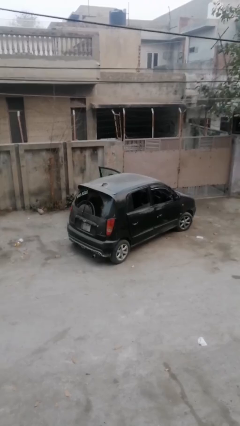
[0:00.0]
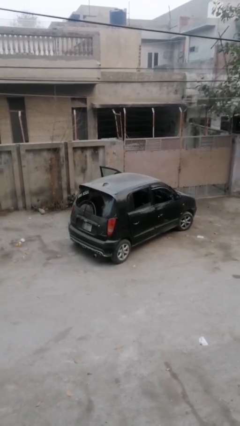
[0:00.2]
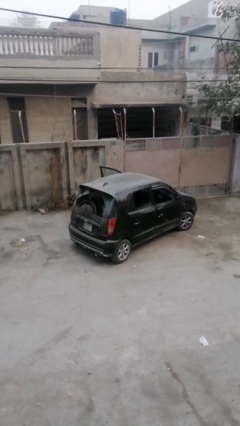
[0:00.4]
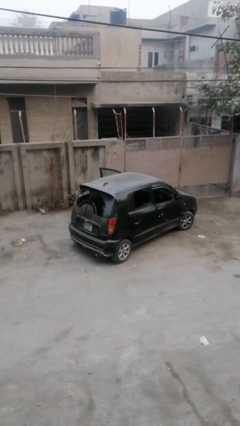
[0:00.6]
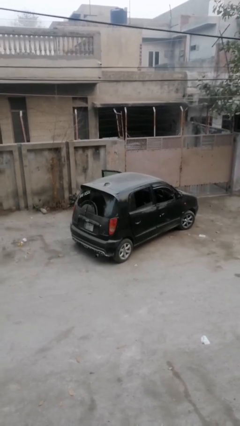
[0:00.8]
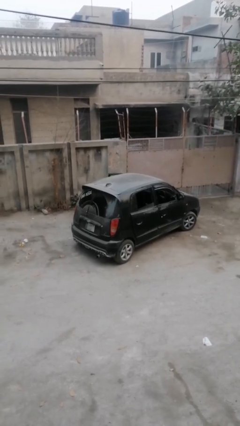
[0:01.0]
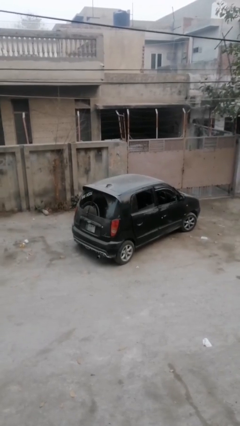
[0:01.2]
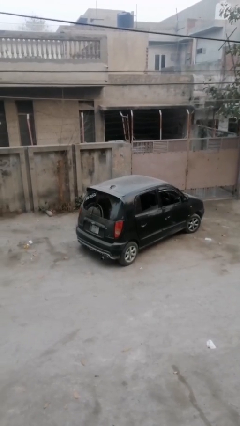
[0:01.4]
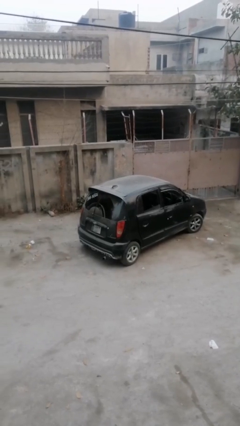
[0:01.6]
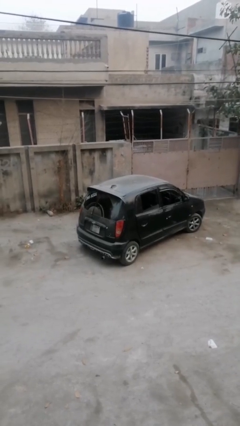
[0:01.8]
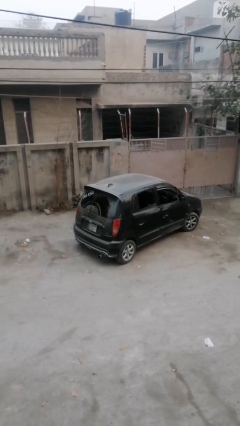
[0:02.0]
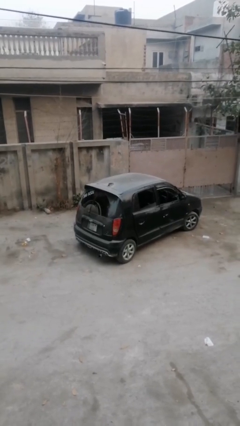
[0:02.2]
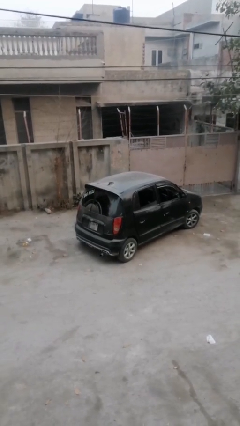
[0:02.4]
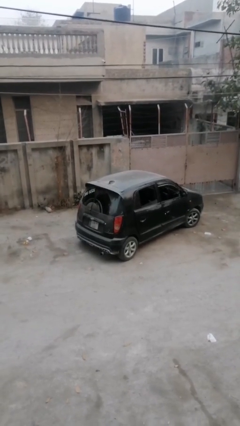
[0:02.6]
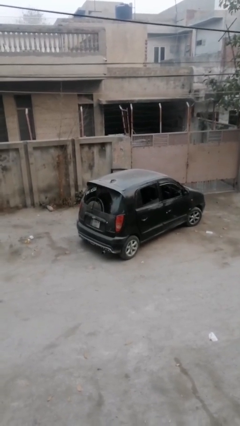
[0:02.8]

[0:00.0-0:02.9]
car picks up person

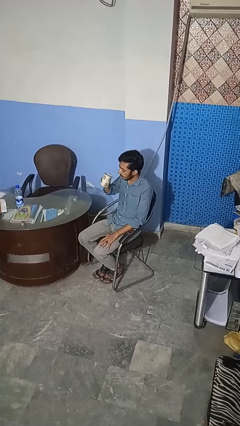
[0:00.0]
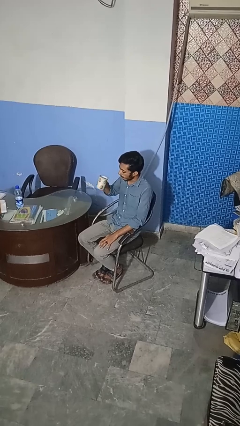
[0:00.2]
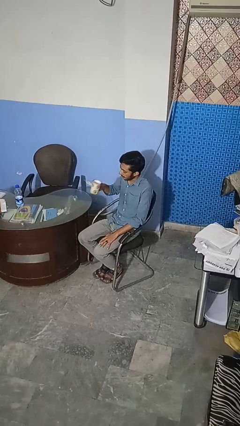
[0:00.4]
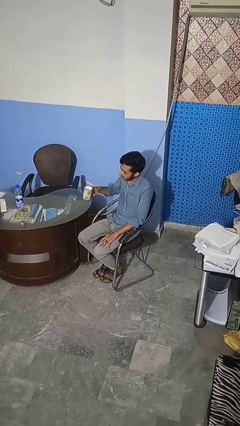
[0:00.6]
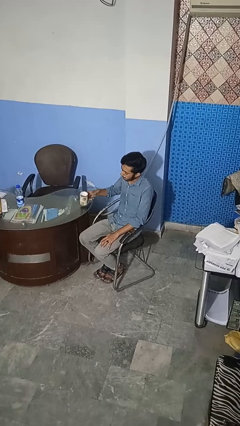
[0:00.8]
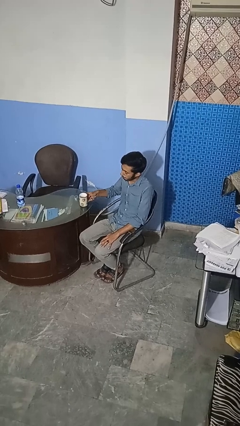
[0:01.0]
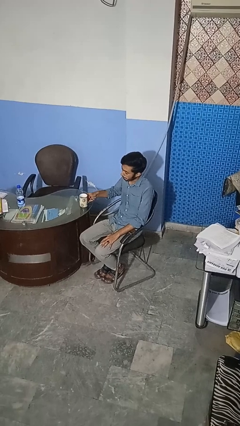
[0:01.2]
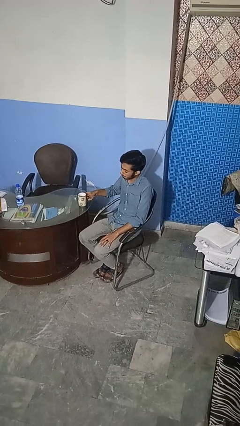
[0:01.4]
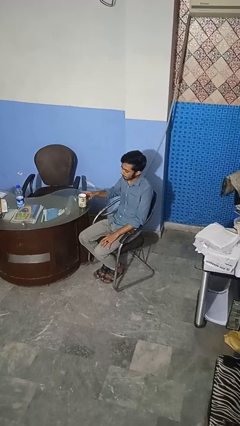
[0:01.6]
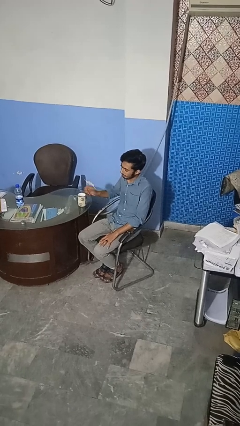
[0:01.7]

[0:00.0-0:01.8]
person puts down object on table

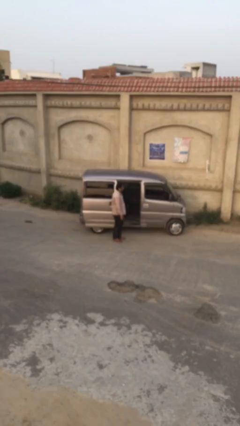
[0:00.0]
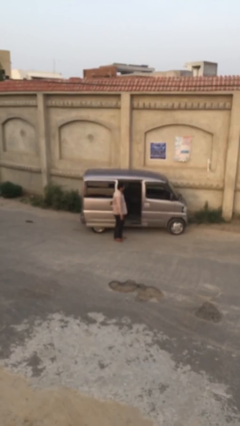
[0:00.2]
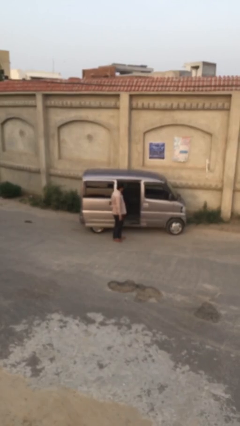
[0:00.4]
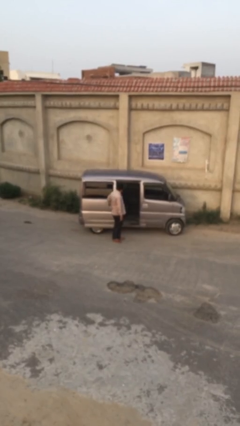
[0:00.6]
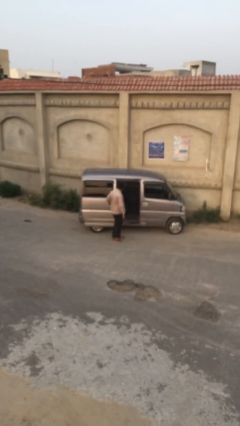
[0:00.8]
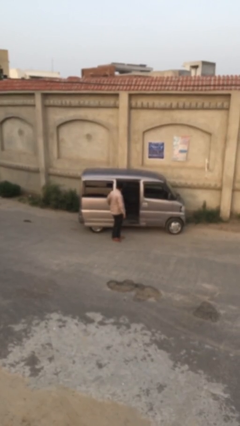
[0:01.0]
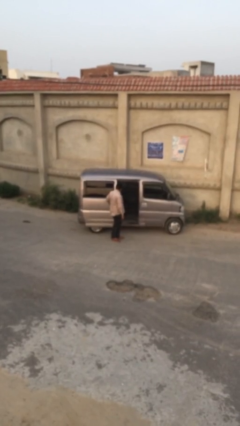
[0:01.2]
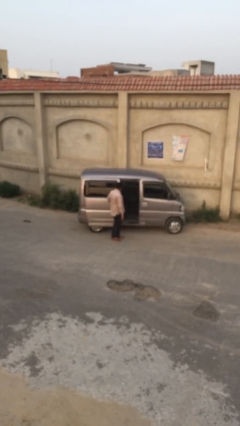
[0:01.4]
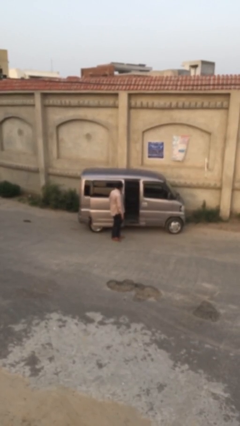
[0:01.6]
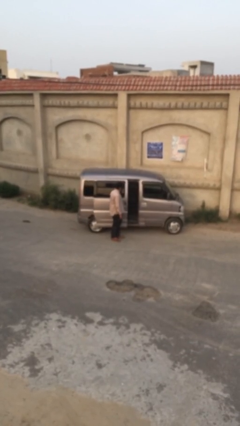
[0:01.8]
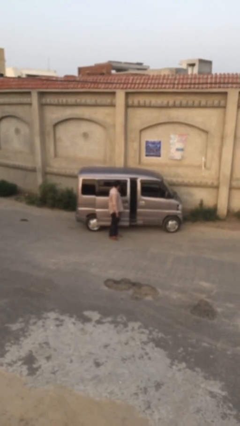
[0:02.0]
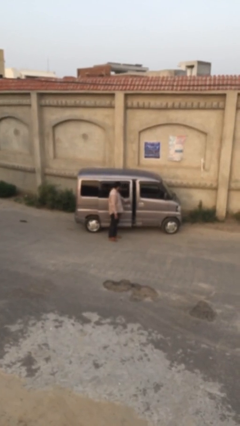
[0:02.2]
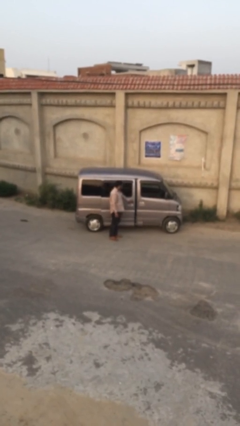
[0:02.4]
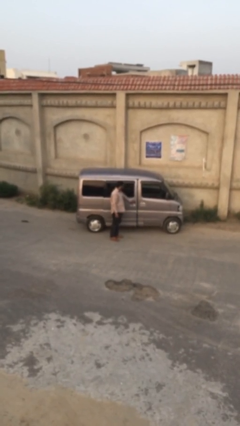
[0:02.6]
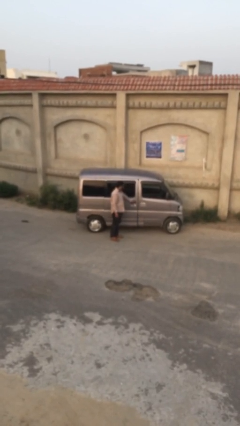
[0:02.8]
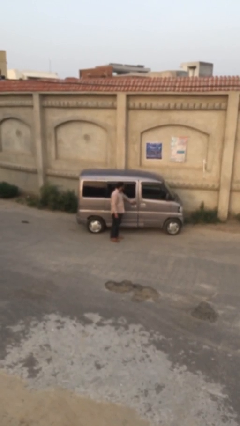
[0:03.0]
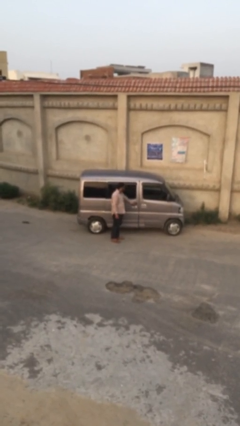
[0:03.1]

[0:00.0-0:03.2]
person closes car door

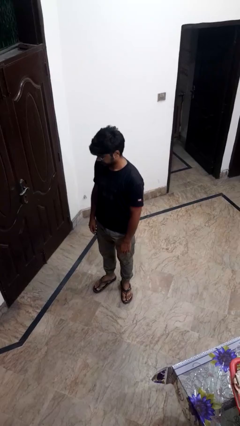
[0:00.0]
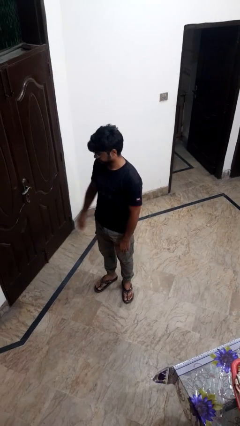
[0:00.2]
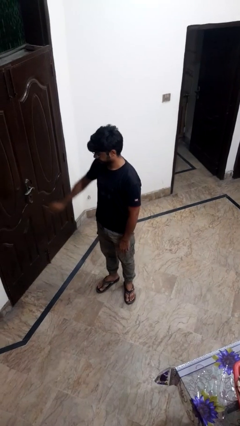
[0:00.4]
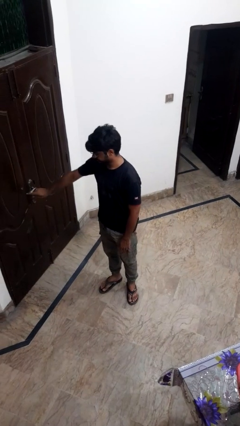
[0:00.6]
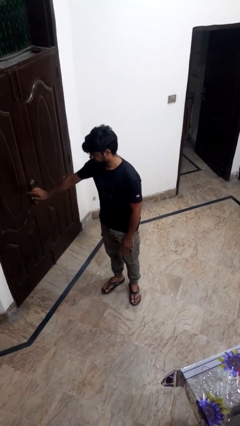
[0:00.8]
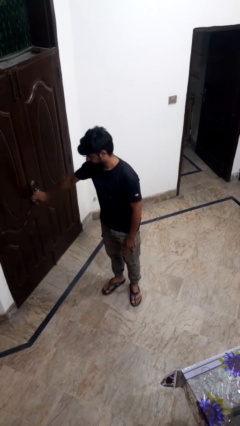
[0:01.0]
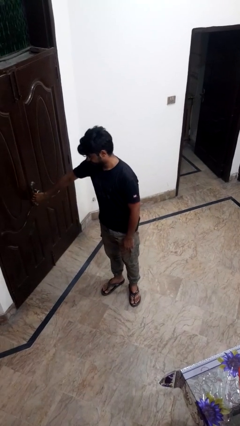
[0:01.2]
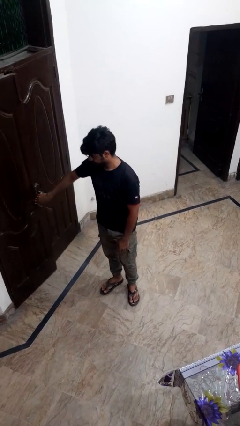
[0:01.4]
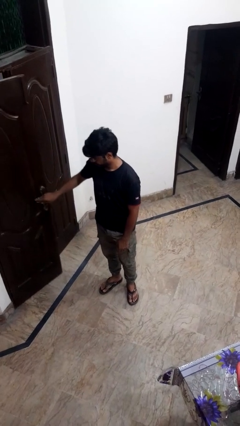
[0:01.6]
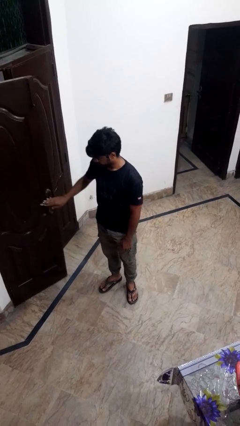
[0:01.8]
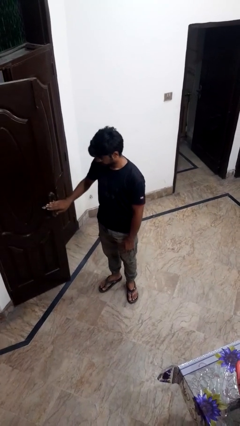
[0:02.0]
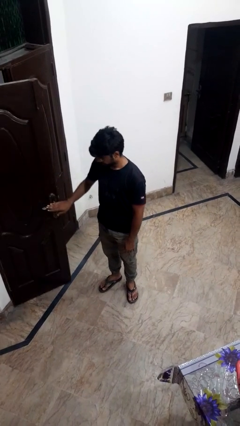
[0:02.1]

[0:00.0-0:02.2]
person opens facility door

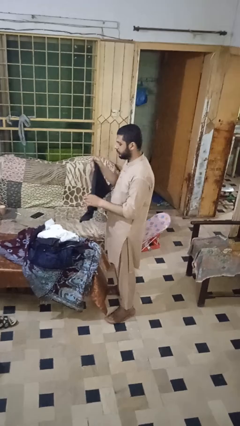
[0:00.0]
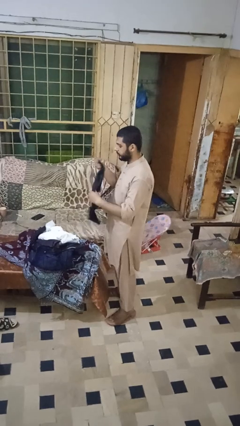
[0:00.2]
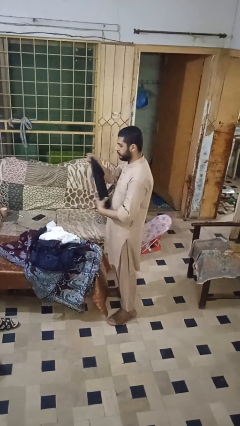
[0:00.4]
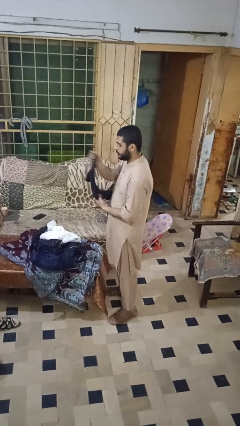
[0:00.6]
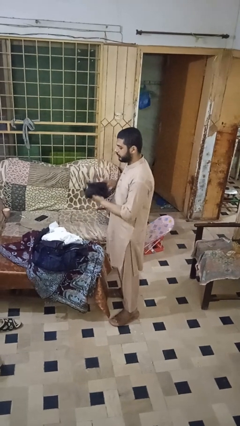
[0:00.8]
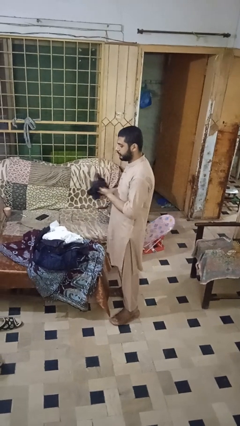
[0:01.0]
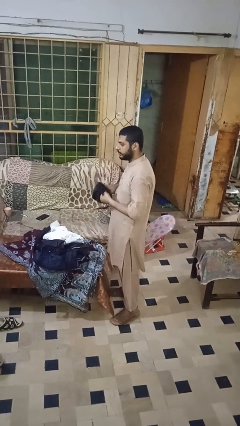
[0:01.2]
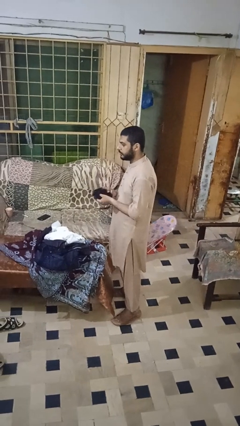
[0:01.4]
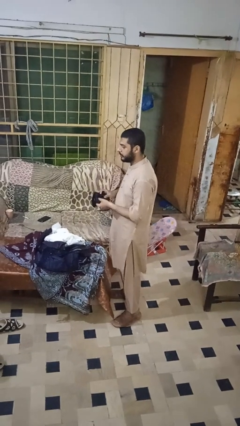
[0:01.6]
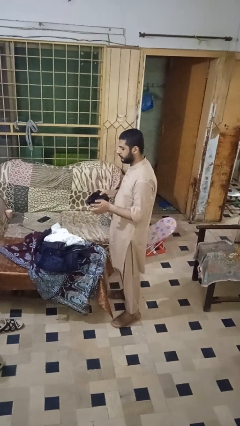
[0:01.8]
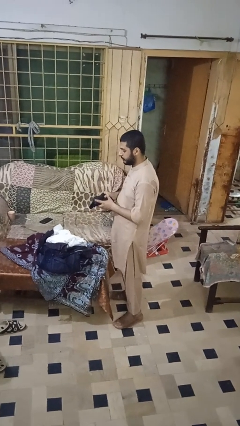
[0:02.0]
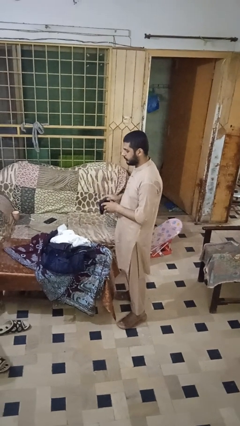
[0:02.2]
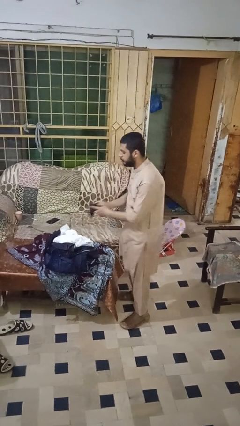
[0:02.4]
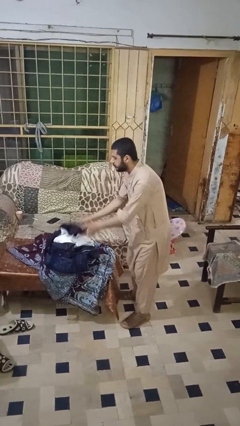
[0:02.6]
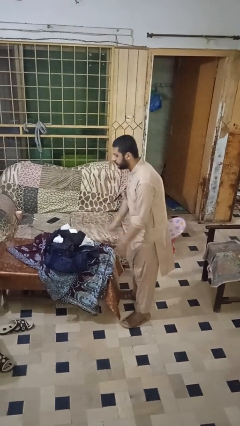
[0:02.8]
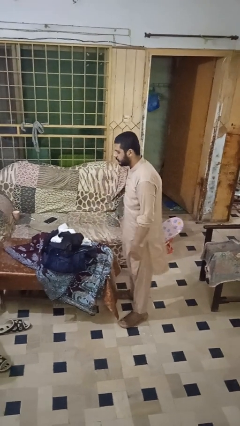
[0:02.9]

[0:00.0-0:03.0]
person folds shirt

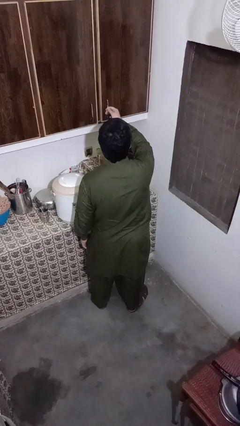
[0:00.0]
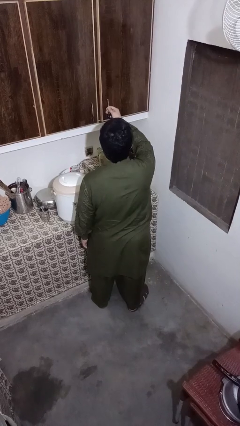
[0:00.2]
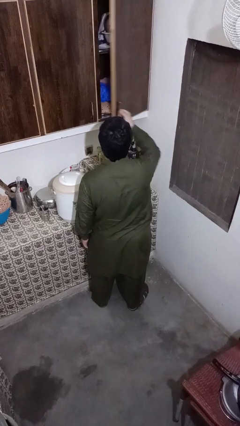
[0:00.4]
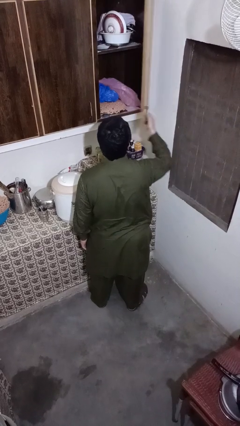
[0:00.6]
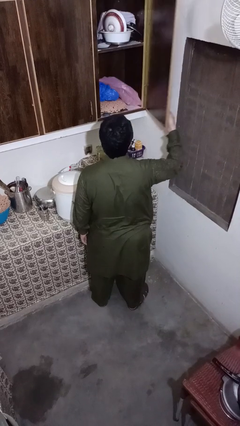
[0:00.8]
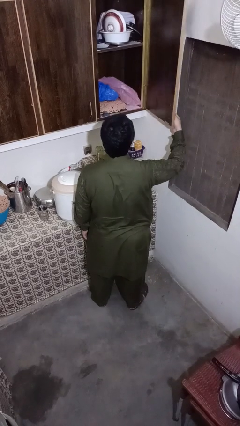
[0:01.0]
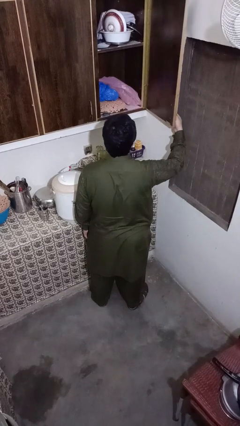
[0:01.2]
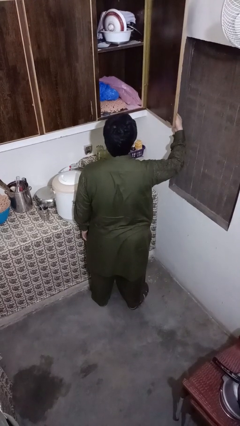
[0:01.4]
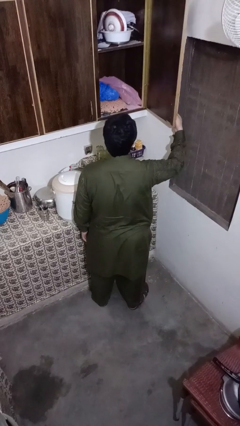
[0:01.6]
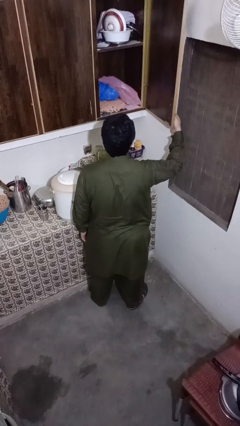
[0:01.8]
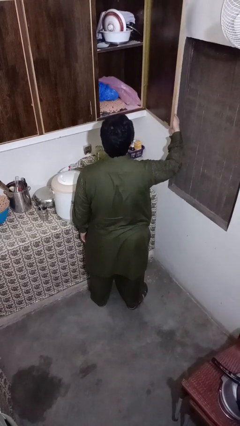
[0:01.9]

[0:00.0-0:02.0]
person opens kitchen drawer

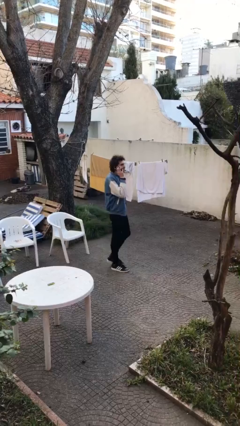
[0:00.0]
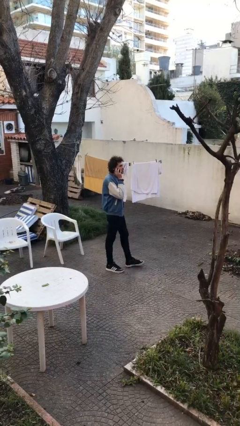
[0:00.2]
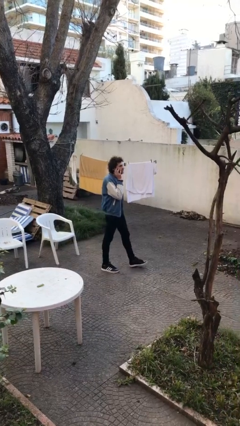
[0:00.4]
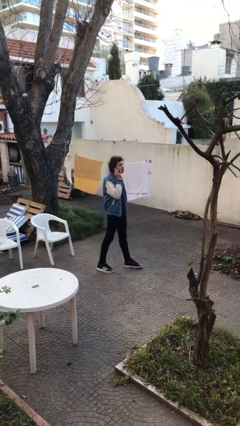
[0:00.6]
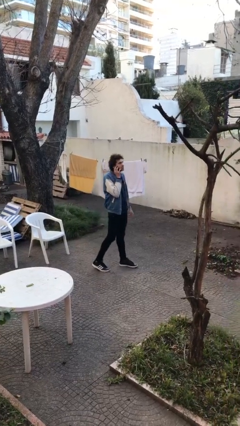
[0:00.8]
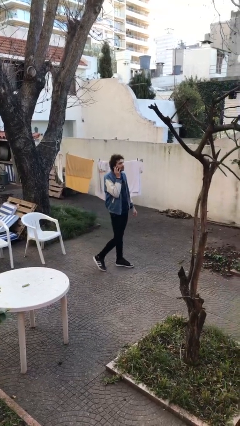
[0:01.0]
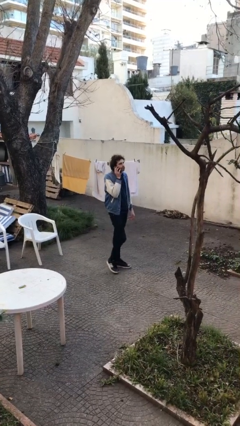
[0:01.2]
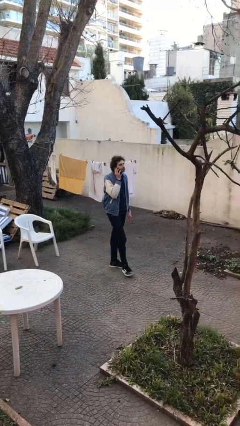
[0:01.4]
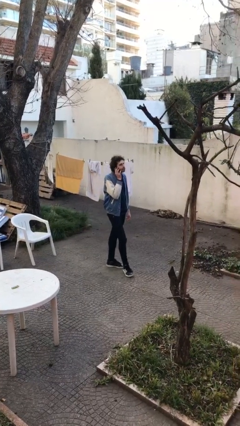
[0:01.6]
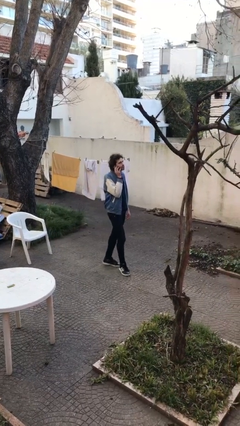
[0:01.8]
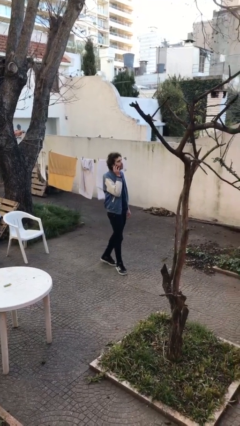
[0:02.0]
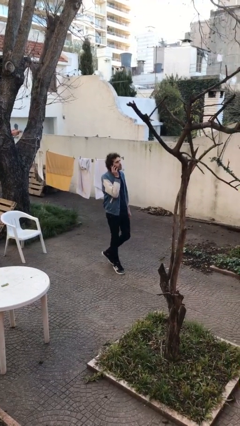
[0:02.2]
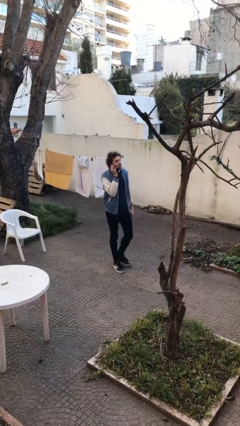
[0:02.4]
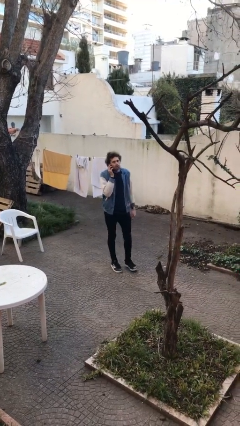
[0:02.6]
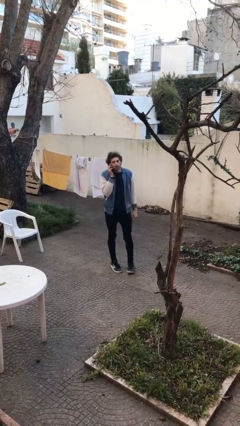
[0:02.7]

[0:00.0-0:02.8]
person talks on phone
